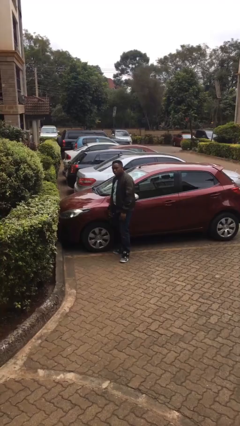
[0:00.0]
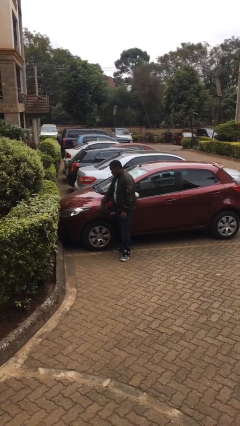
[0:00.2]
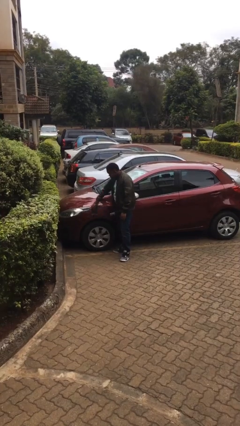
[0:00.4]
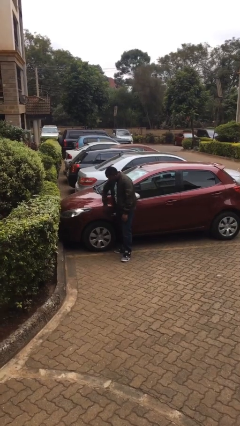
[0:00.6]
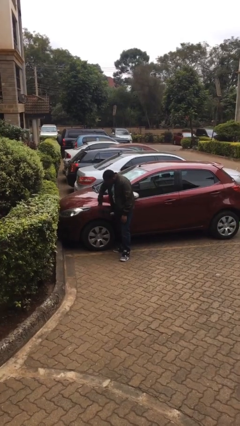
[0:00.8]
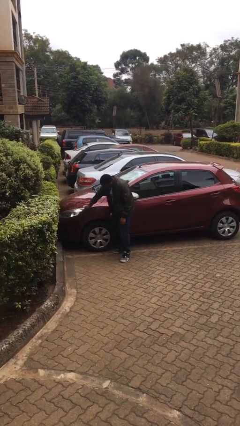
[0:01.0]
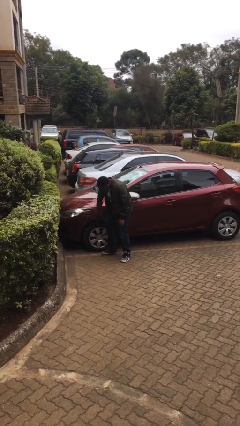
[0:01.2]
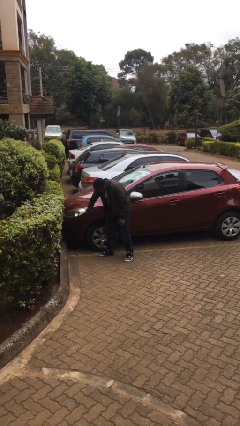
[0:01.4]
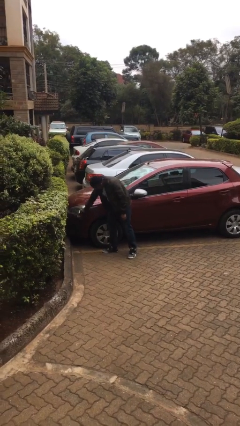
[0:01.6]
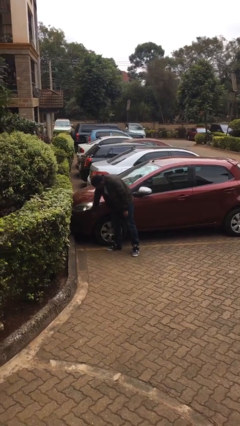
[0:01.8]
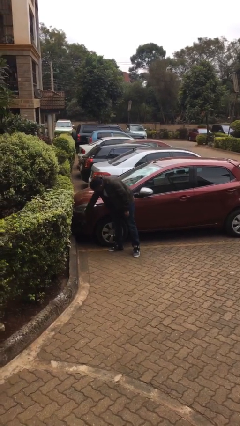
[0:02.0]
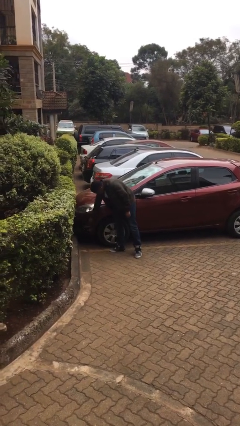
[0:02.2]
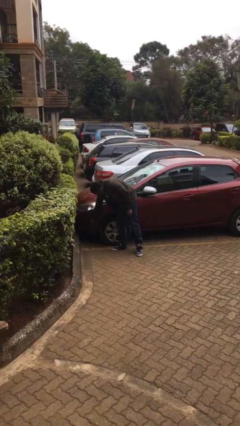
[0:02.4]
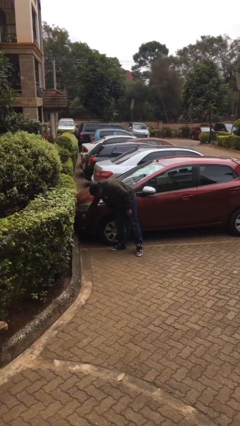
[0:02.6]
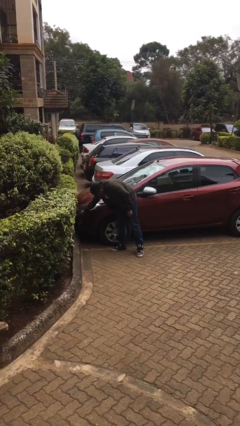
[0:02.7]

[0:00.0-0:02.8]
person polishes car with rag

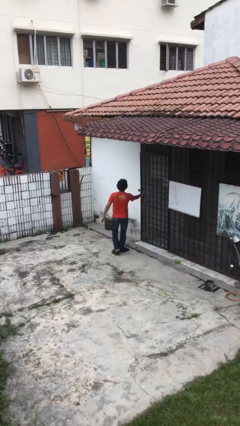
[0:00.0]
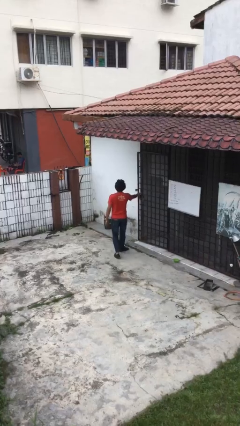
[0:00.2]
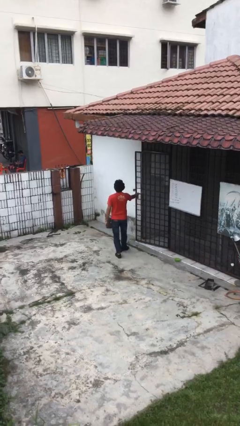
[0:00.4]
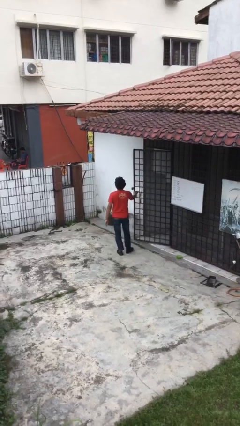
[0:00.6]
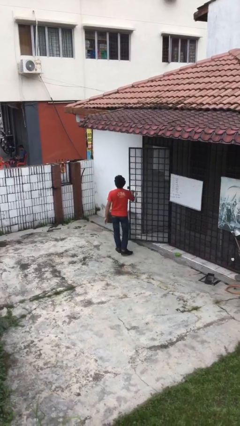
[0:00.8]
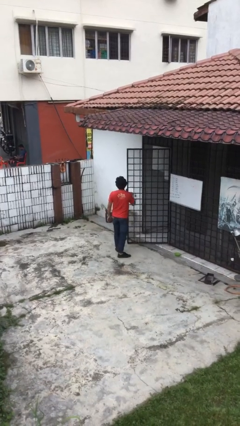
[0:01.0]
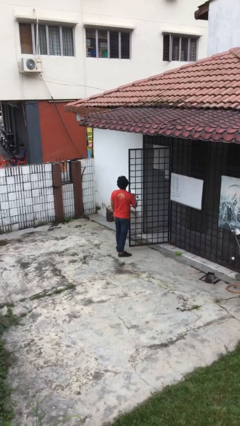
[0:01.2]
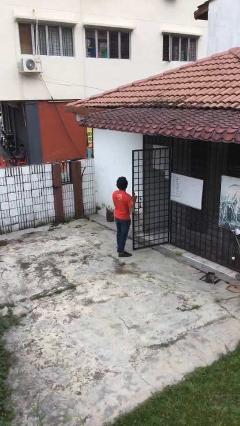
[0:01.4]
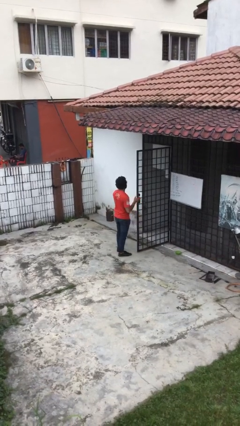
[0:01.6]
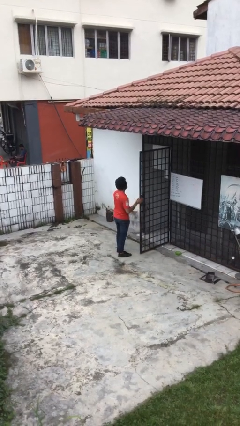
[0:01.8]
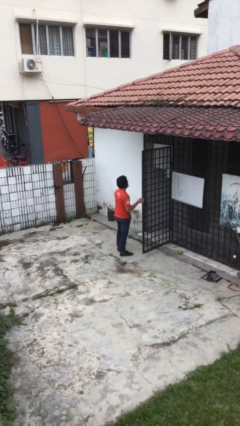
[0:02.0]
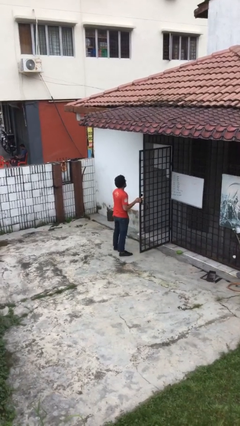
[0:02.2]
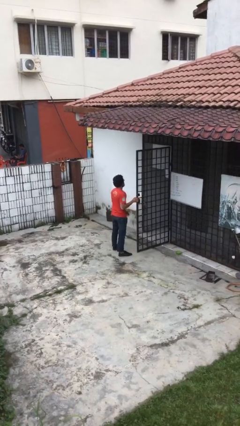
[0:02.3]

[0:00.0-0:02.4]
person opens facility door

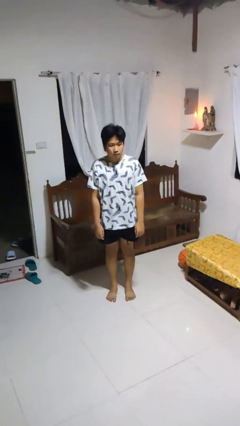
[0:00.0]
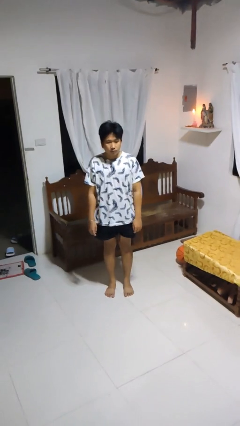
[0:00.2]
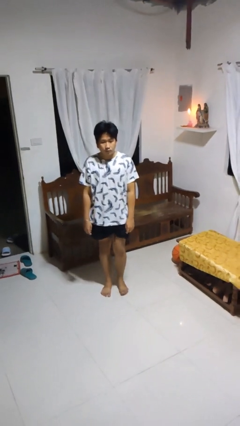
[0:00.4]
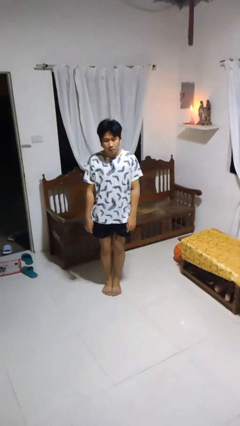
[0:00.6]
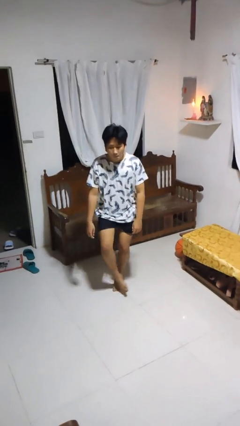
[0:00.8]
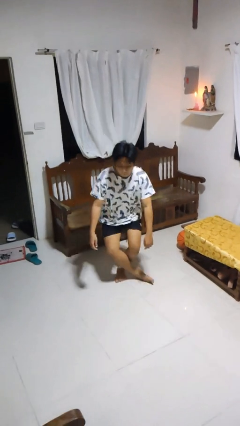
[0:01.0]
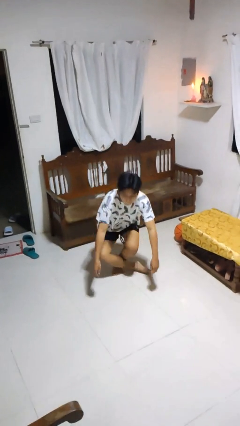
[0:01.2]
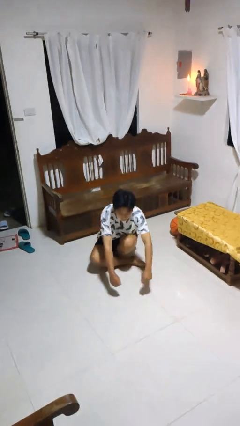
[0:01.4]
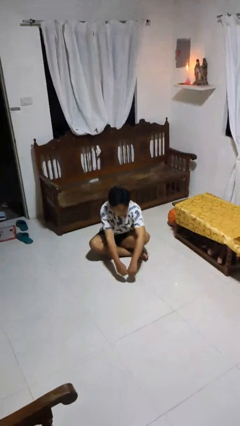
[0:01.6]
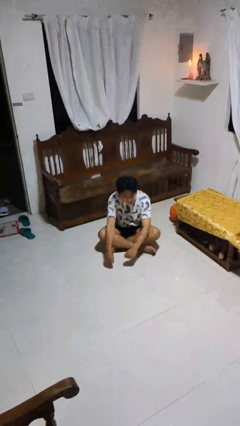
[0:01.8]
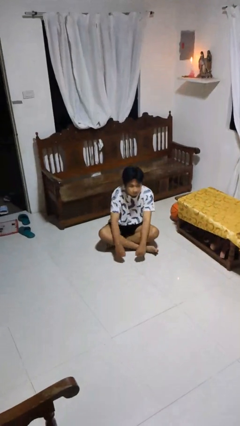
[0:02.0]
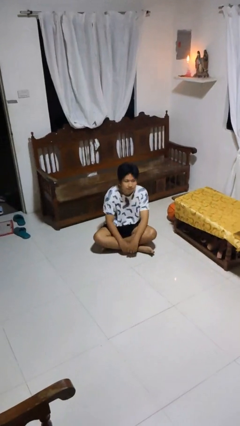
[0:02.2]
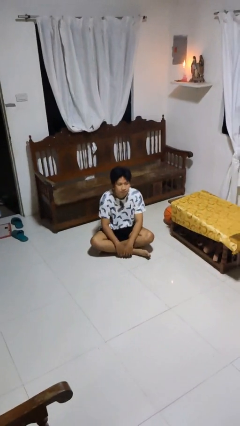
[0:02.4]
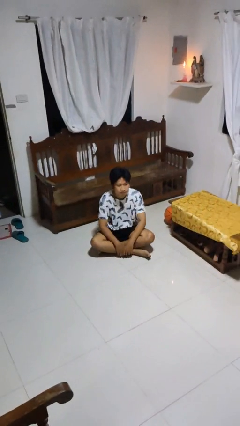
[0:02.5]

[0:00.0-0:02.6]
person sits crisscross

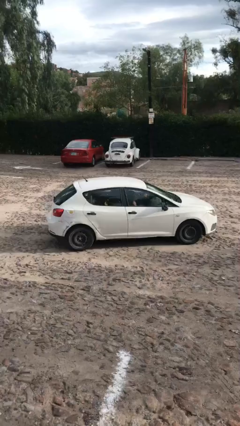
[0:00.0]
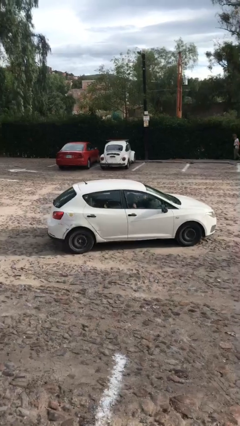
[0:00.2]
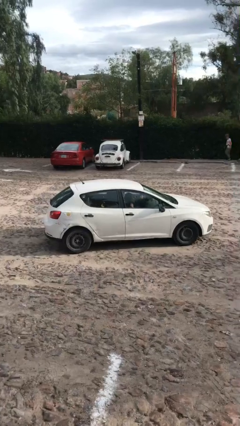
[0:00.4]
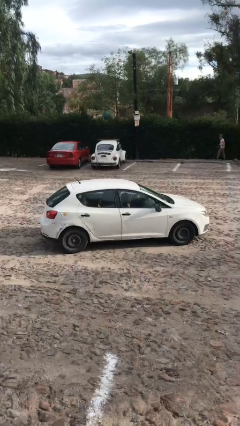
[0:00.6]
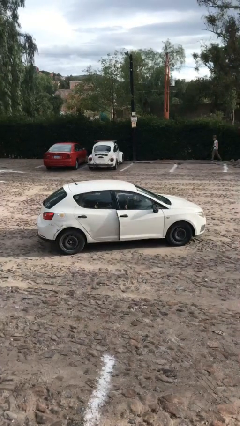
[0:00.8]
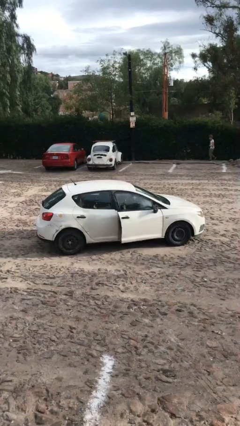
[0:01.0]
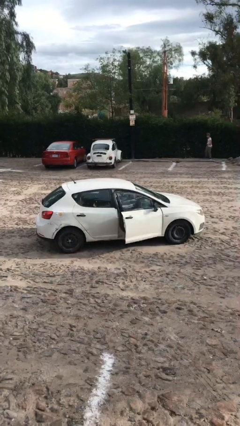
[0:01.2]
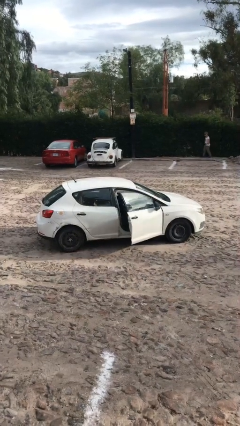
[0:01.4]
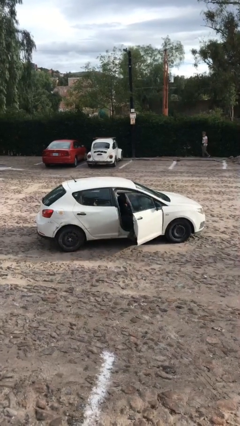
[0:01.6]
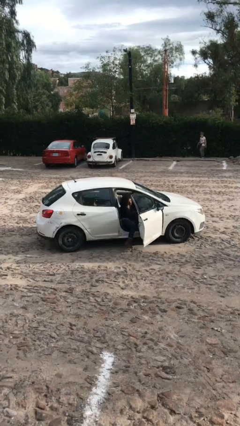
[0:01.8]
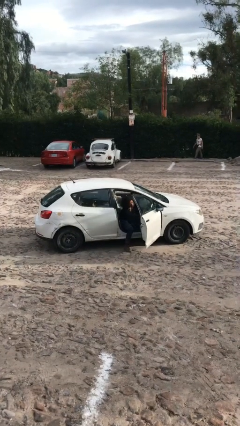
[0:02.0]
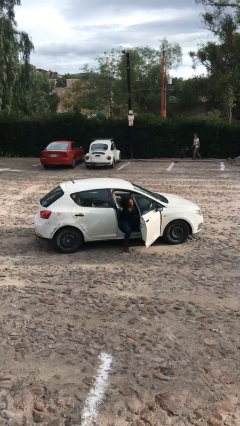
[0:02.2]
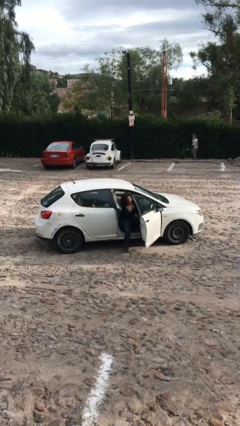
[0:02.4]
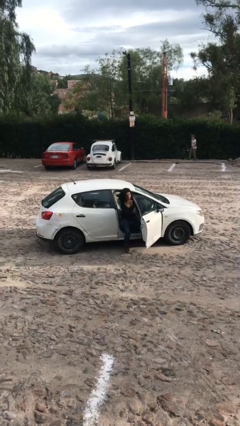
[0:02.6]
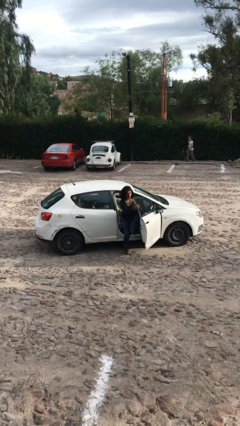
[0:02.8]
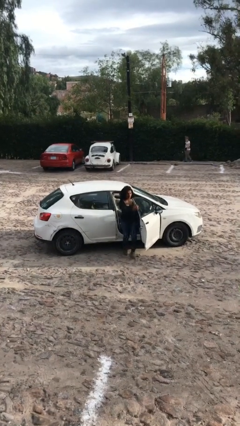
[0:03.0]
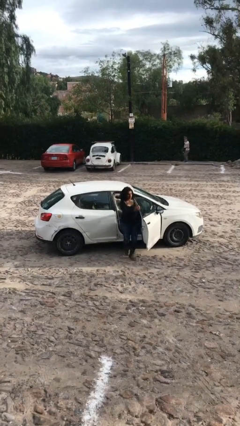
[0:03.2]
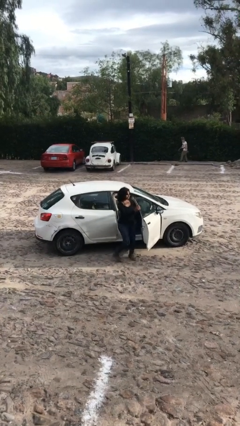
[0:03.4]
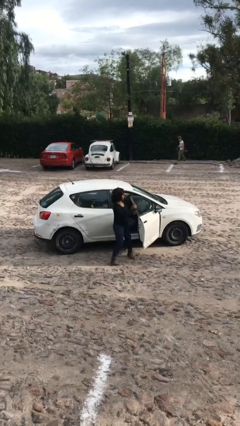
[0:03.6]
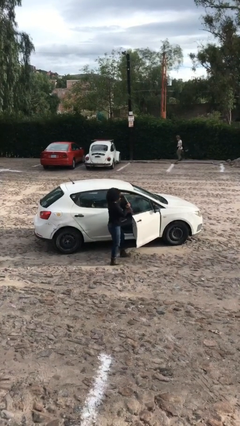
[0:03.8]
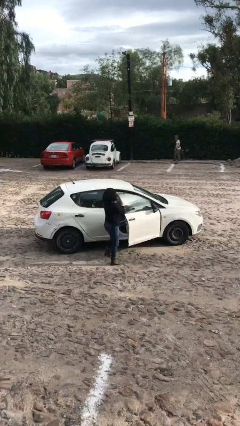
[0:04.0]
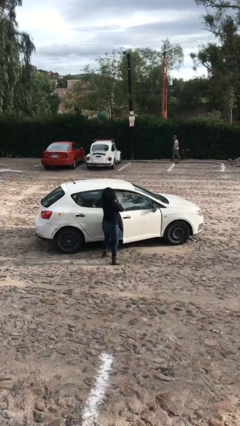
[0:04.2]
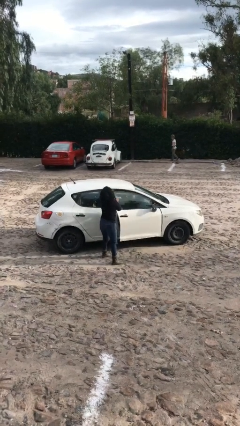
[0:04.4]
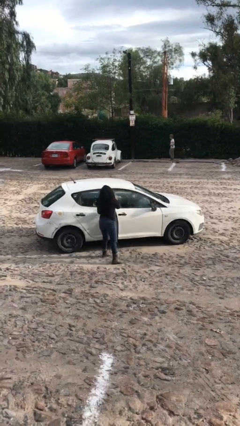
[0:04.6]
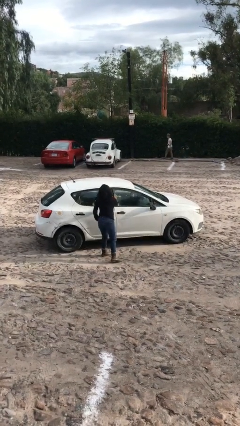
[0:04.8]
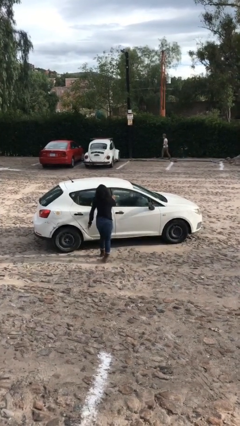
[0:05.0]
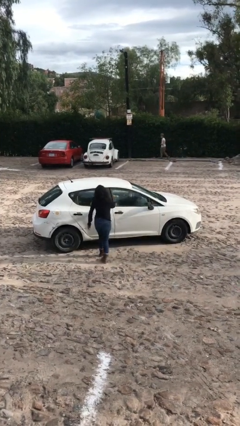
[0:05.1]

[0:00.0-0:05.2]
car drops off person

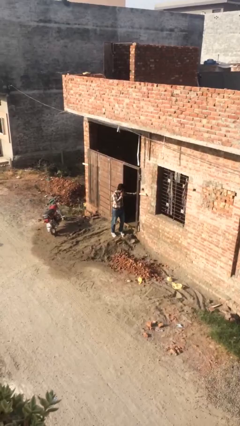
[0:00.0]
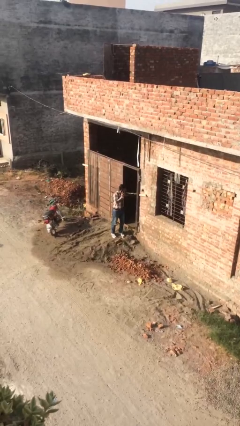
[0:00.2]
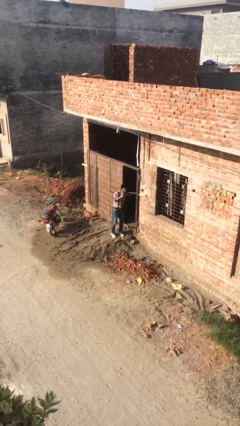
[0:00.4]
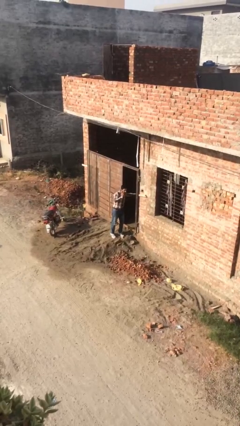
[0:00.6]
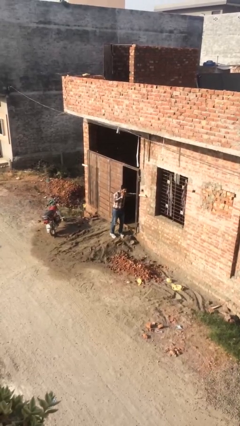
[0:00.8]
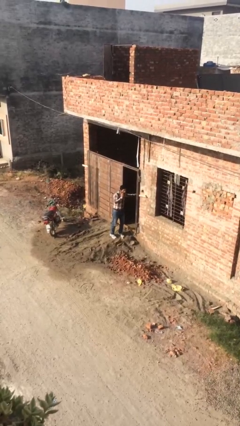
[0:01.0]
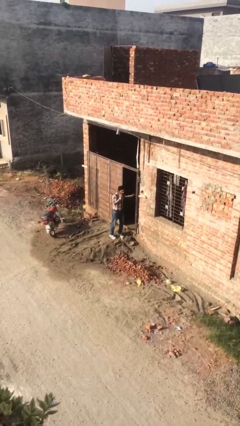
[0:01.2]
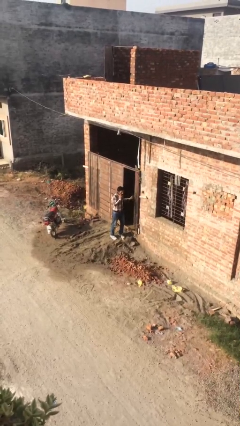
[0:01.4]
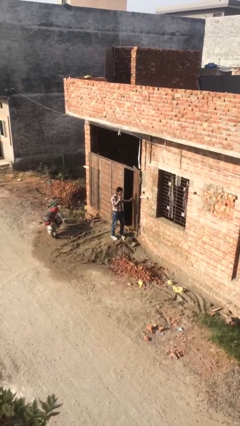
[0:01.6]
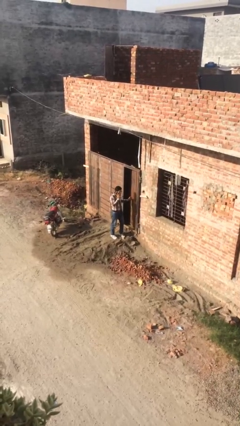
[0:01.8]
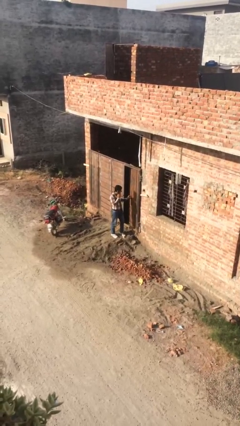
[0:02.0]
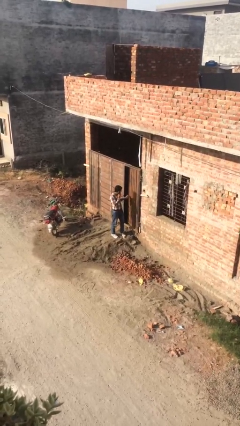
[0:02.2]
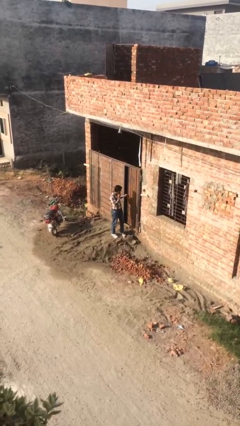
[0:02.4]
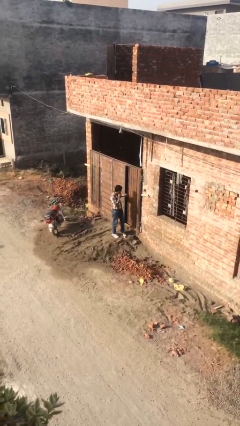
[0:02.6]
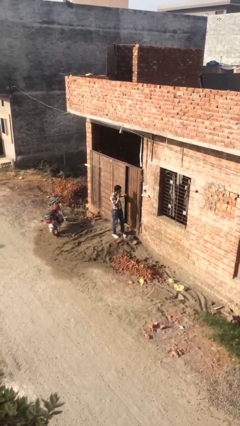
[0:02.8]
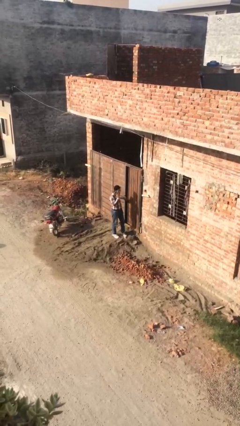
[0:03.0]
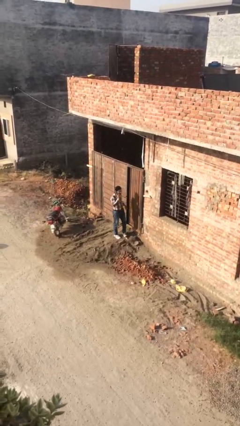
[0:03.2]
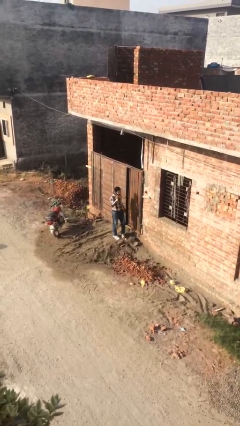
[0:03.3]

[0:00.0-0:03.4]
person closes facility door

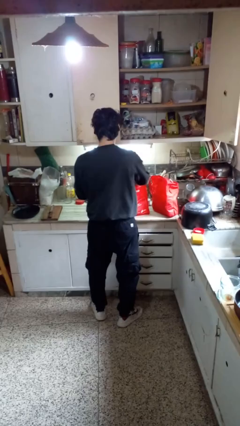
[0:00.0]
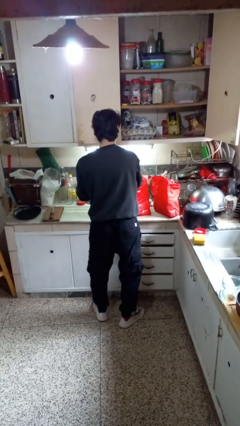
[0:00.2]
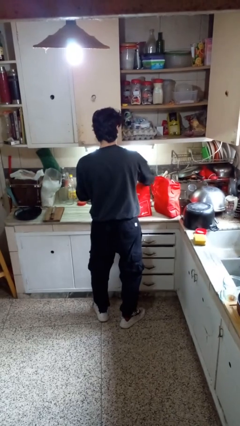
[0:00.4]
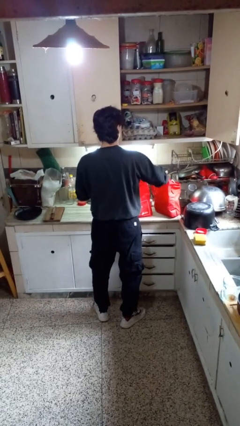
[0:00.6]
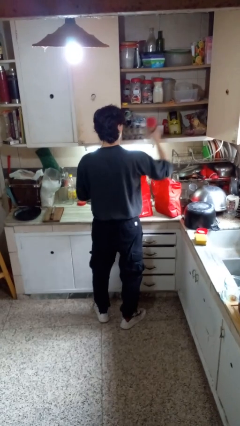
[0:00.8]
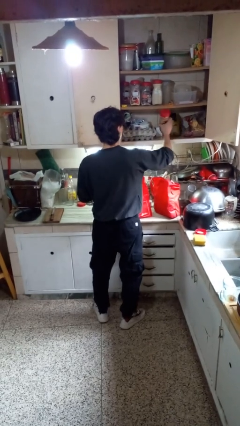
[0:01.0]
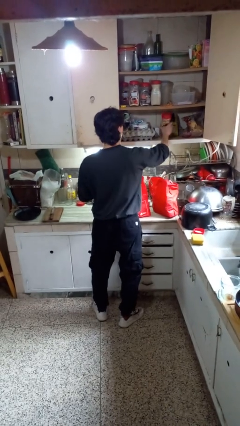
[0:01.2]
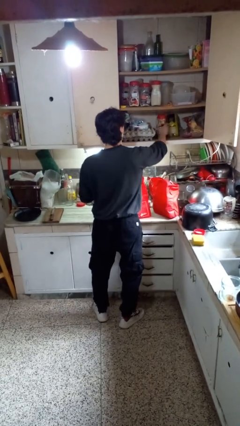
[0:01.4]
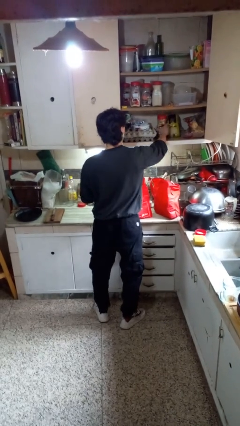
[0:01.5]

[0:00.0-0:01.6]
person loads groceries into cabinet
